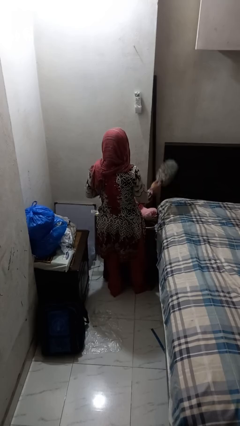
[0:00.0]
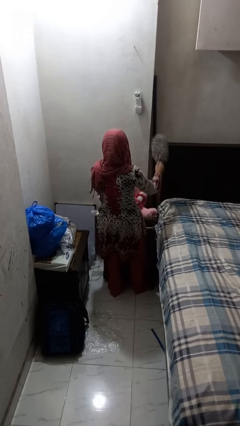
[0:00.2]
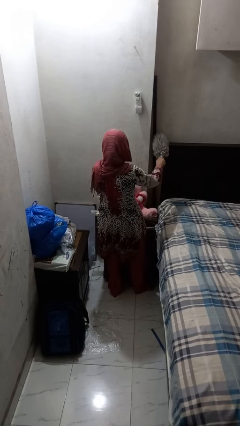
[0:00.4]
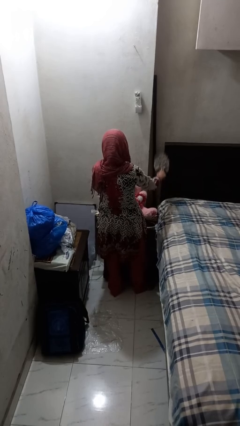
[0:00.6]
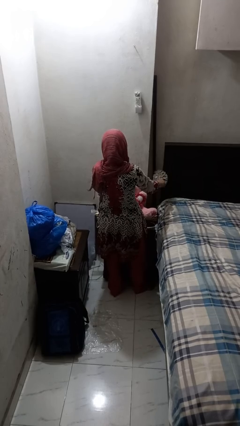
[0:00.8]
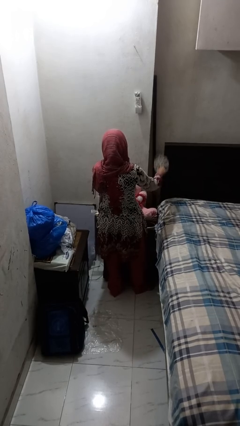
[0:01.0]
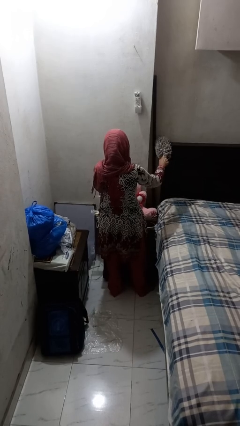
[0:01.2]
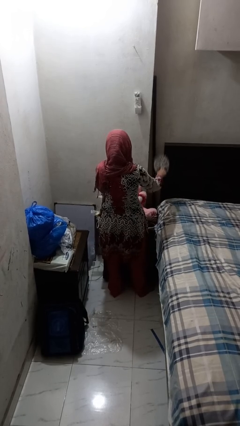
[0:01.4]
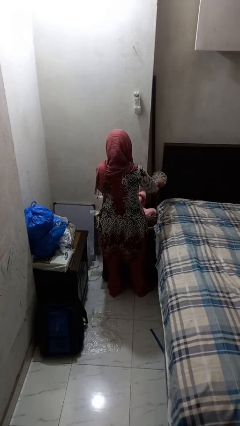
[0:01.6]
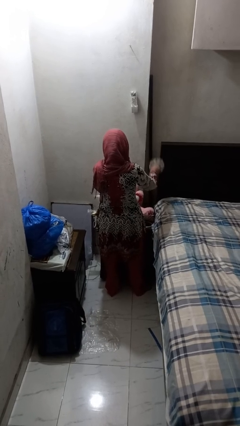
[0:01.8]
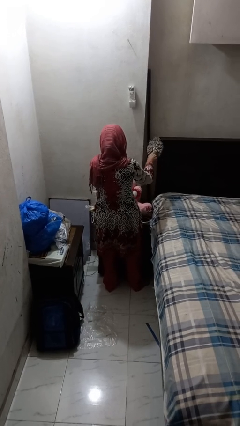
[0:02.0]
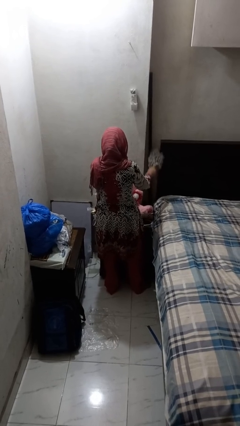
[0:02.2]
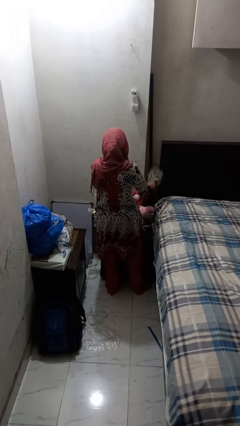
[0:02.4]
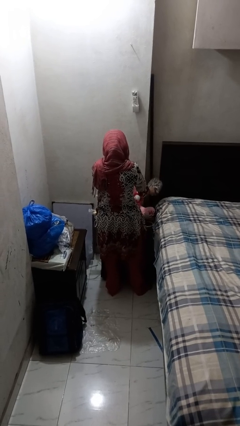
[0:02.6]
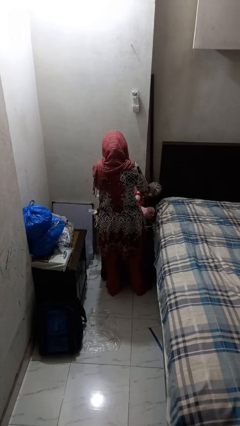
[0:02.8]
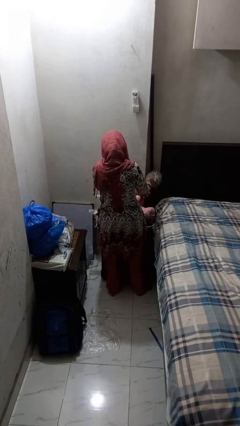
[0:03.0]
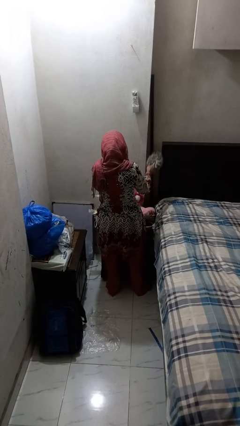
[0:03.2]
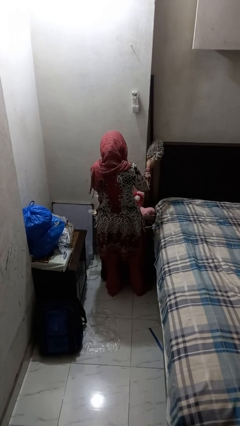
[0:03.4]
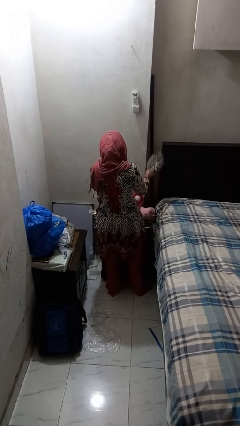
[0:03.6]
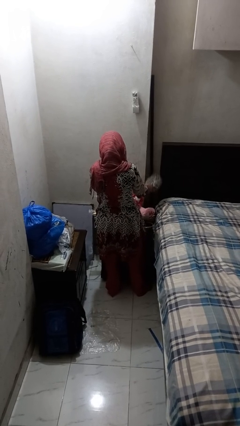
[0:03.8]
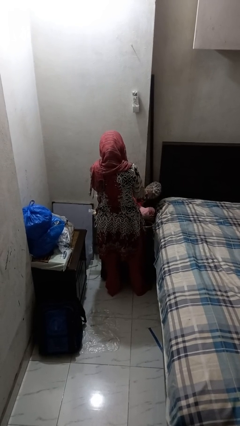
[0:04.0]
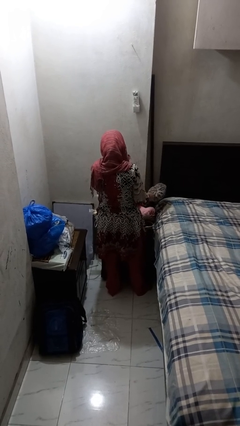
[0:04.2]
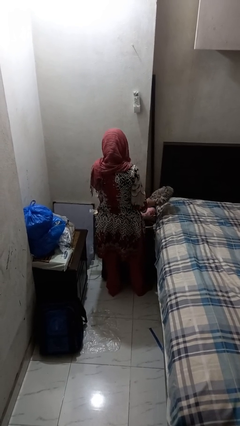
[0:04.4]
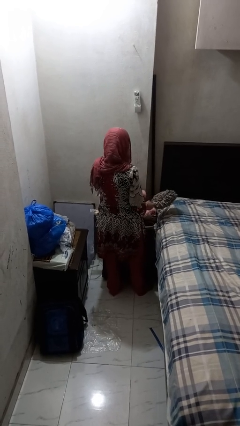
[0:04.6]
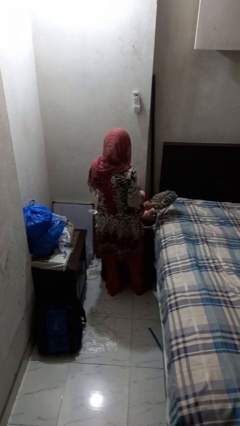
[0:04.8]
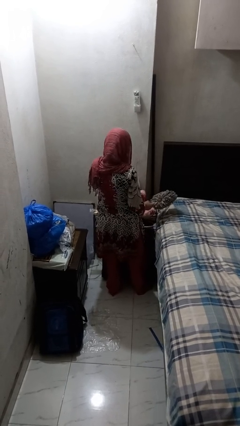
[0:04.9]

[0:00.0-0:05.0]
person dusts furniture

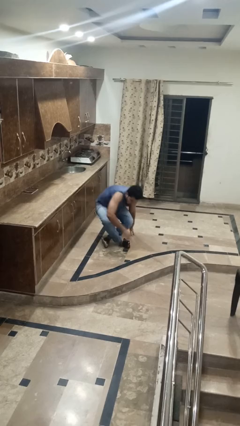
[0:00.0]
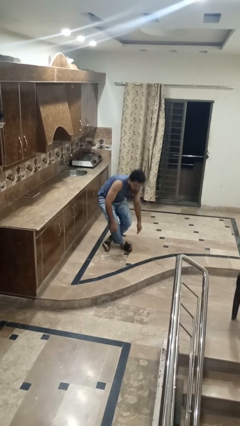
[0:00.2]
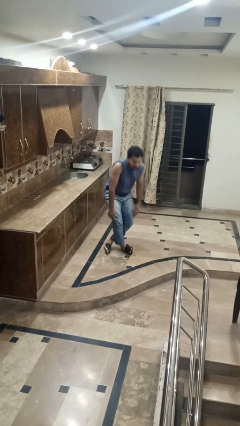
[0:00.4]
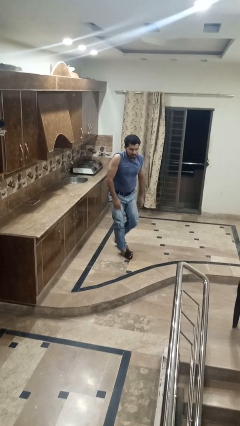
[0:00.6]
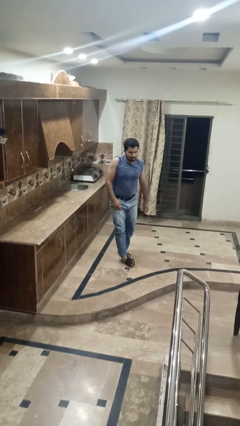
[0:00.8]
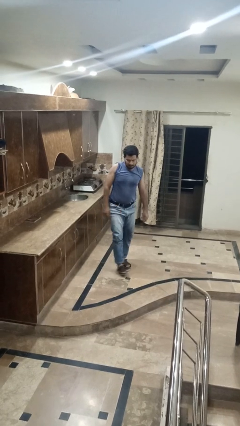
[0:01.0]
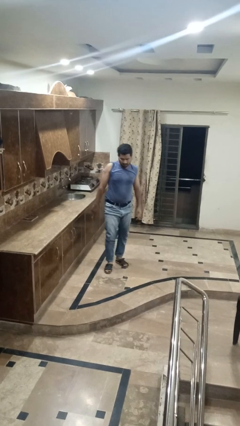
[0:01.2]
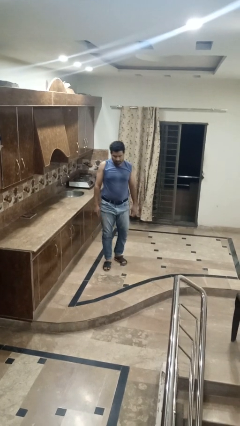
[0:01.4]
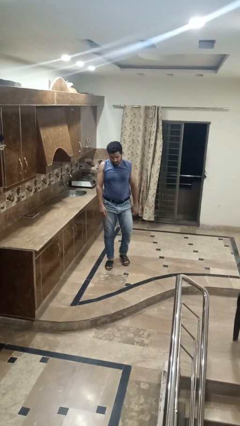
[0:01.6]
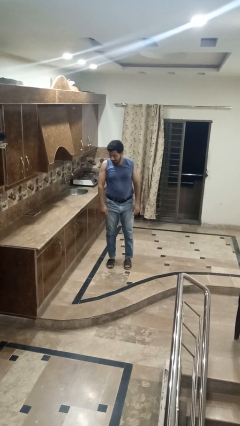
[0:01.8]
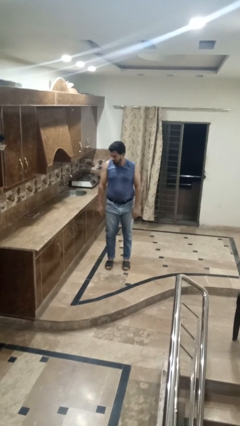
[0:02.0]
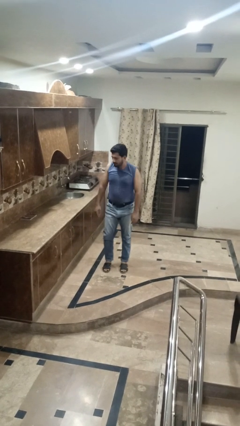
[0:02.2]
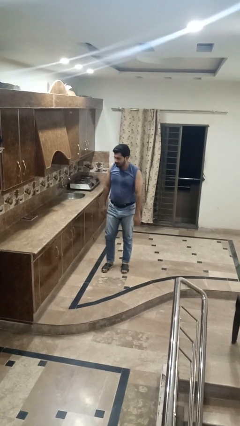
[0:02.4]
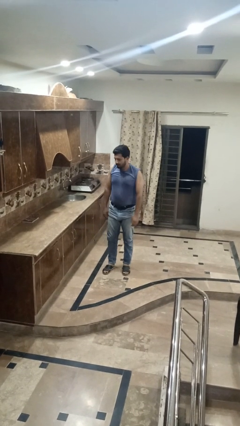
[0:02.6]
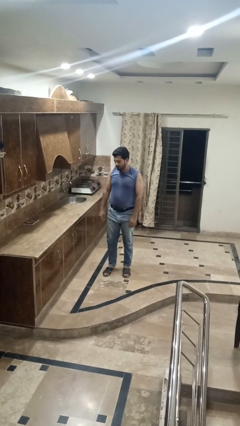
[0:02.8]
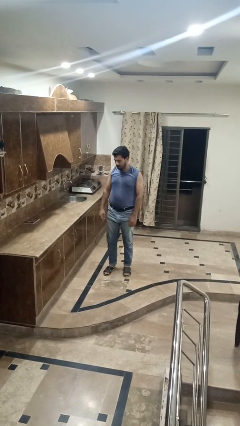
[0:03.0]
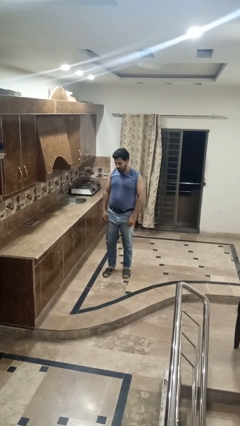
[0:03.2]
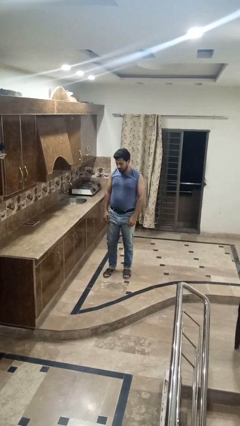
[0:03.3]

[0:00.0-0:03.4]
person stands up from floor

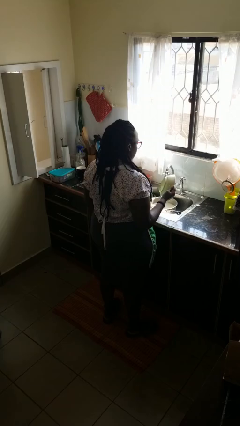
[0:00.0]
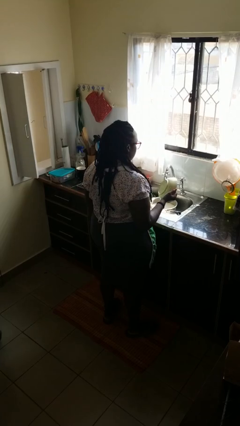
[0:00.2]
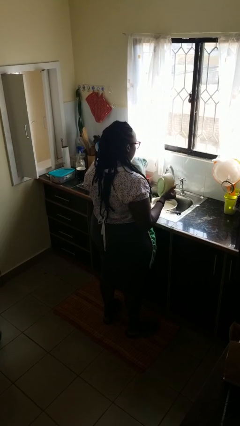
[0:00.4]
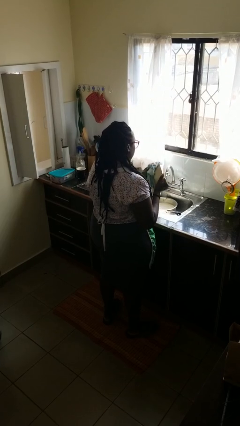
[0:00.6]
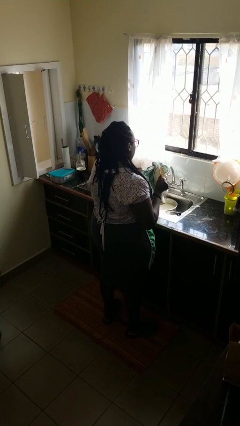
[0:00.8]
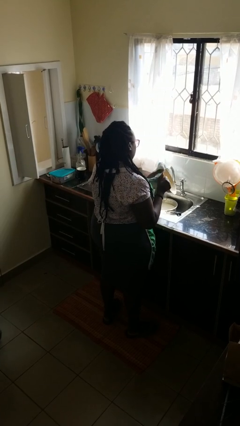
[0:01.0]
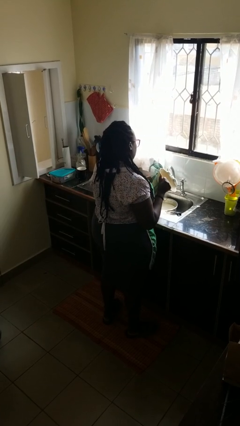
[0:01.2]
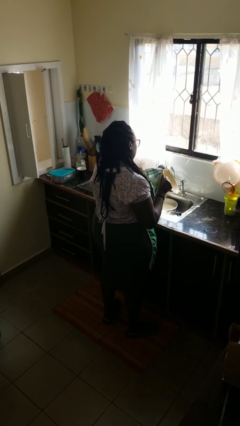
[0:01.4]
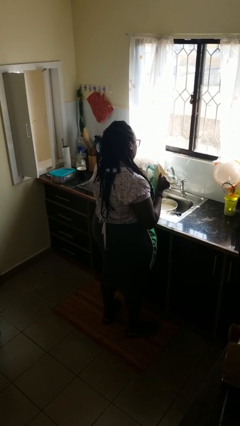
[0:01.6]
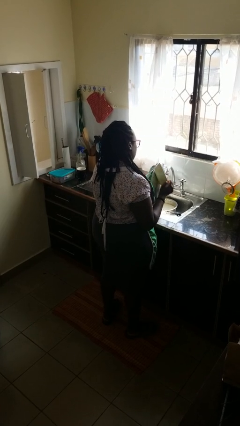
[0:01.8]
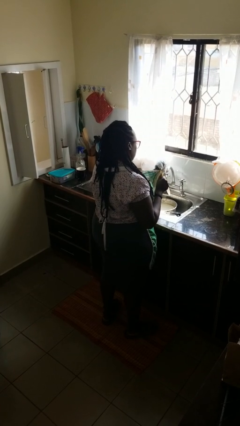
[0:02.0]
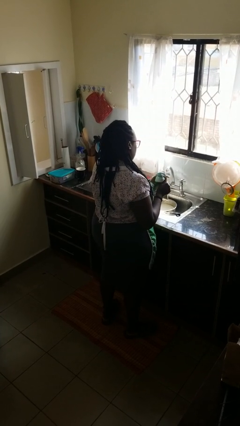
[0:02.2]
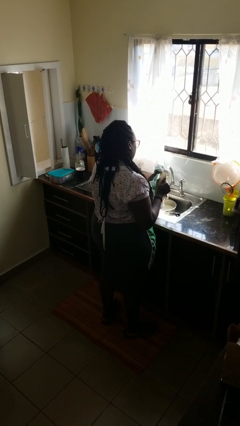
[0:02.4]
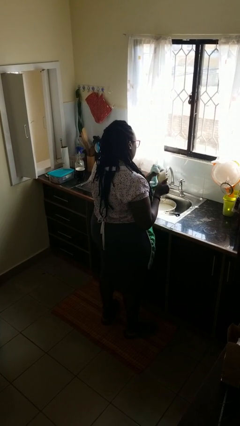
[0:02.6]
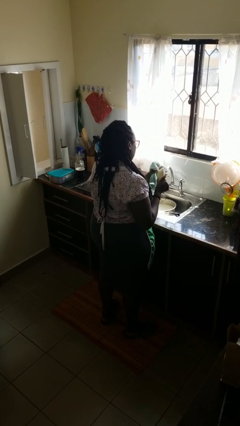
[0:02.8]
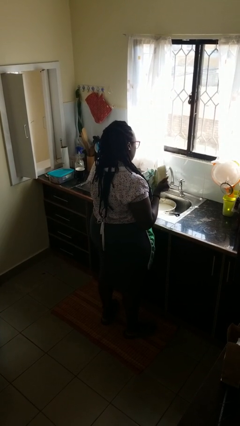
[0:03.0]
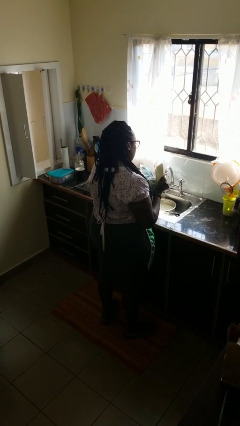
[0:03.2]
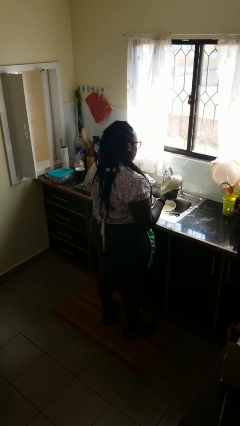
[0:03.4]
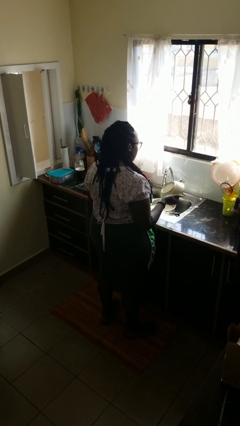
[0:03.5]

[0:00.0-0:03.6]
person dries dish

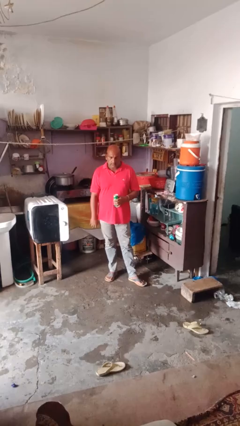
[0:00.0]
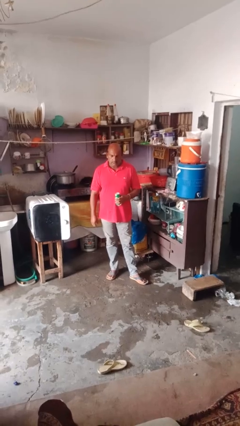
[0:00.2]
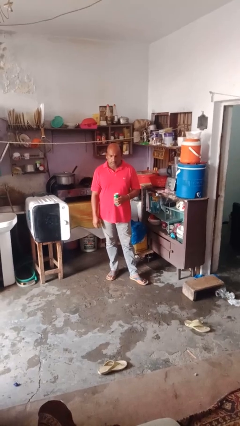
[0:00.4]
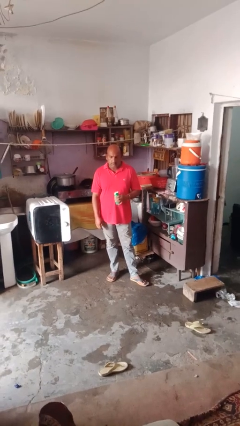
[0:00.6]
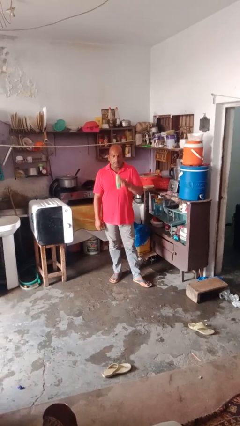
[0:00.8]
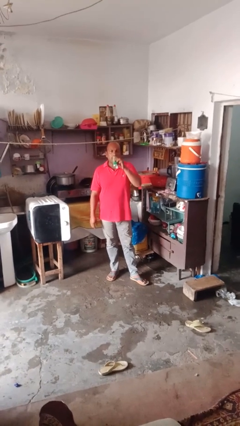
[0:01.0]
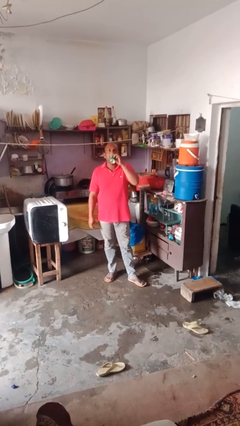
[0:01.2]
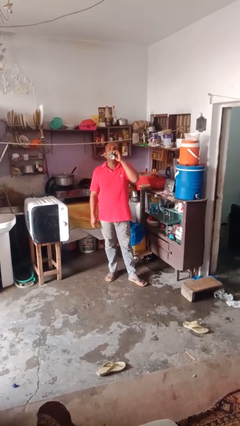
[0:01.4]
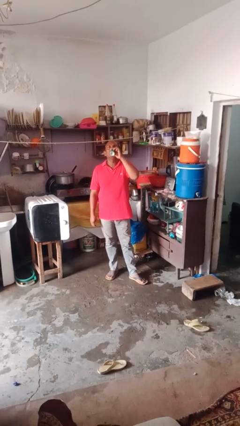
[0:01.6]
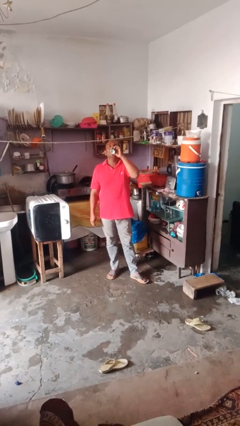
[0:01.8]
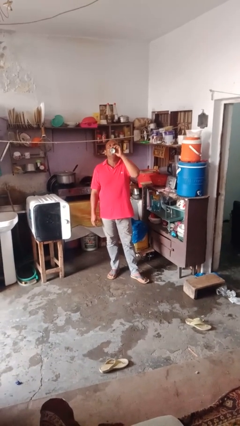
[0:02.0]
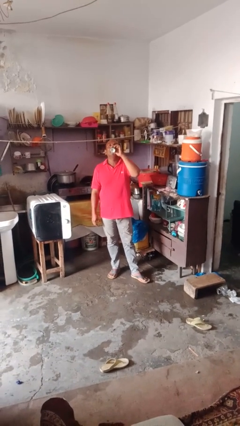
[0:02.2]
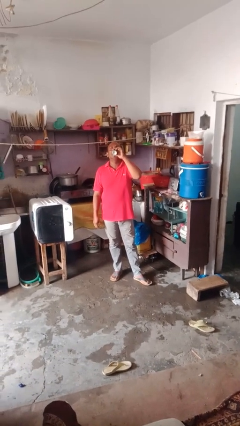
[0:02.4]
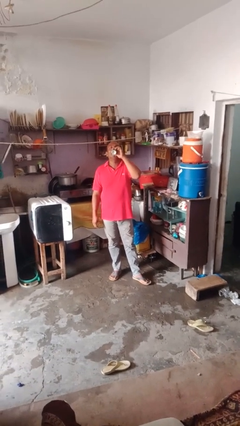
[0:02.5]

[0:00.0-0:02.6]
person drinks from beverage can

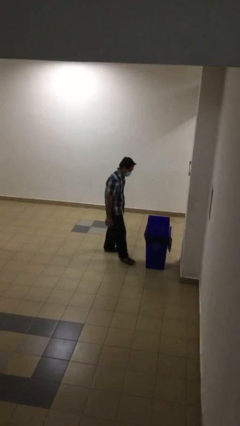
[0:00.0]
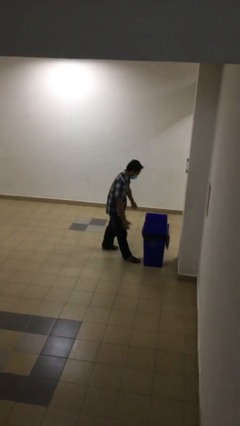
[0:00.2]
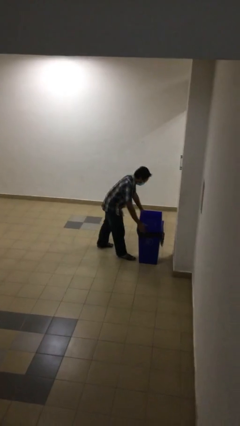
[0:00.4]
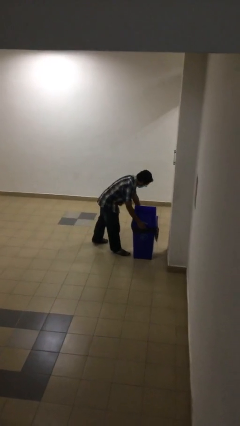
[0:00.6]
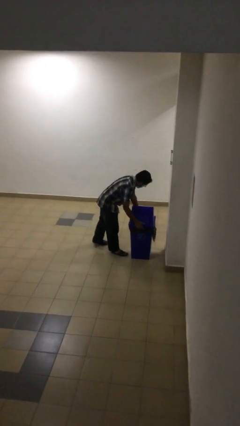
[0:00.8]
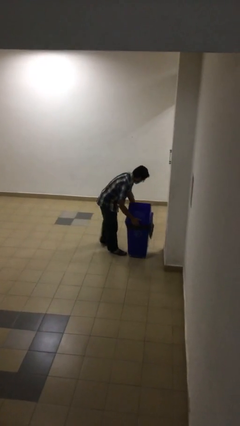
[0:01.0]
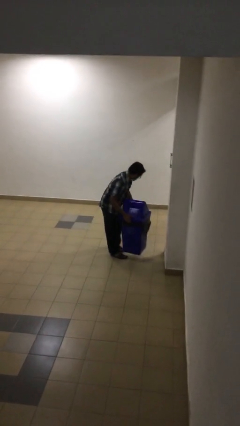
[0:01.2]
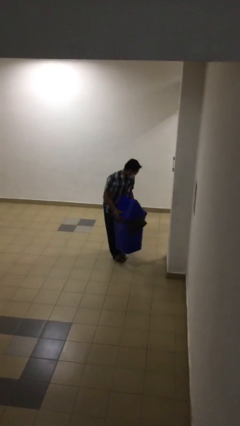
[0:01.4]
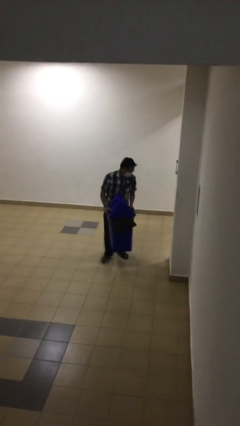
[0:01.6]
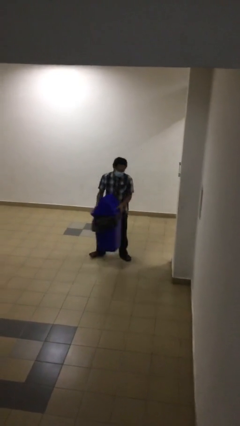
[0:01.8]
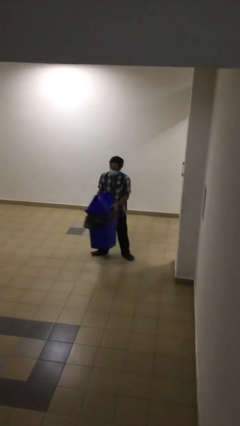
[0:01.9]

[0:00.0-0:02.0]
person picks up object from floor

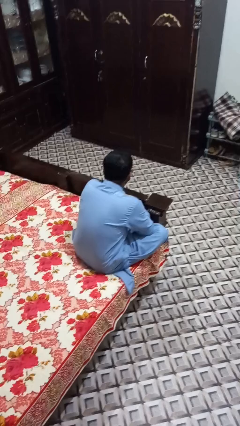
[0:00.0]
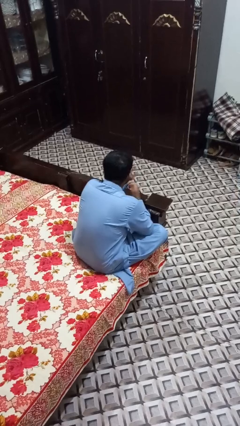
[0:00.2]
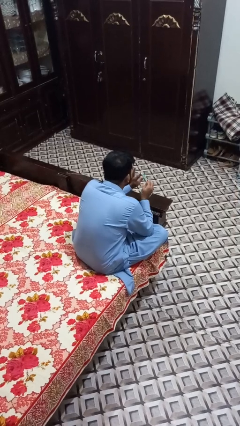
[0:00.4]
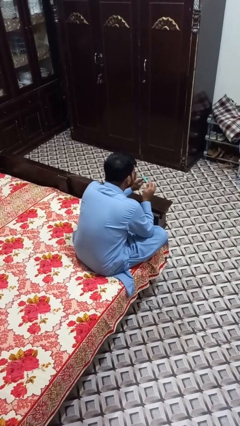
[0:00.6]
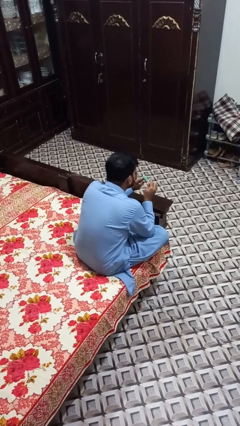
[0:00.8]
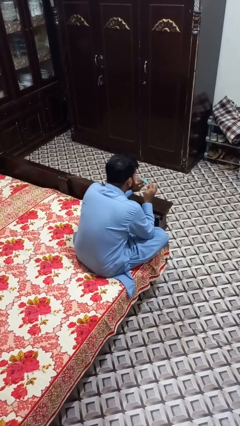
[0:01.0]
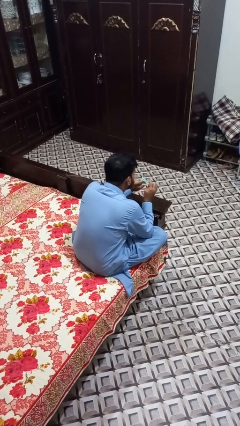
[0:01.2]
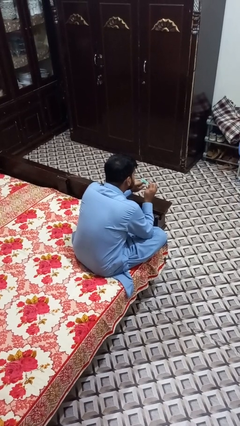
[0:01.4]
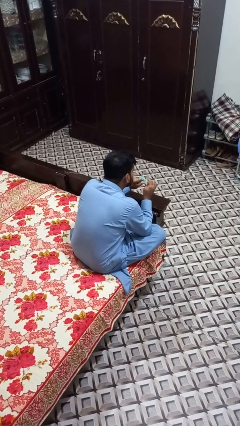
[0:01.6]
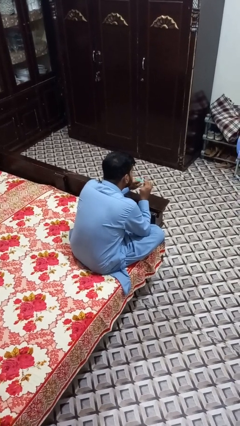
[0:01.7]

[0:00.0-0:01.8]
person files fingernails
